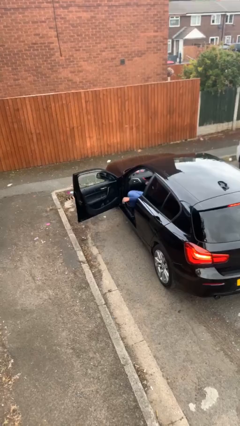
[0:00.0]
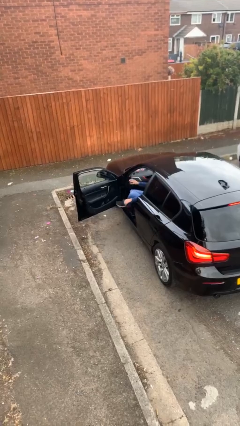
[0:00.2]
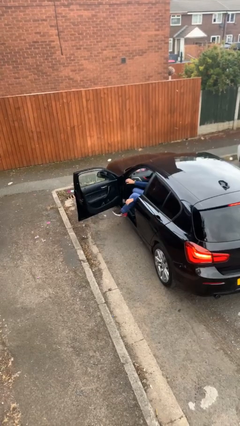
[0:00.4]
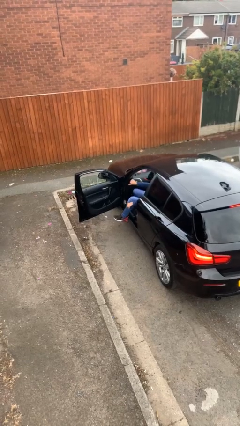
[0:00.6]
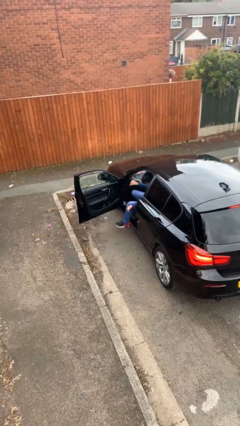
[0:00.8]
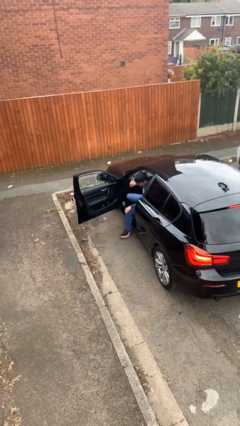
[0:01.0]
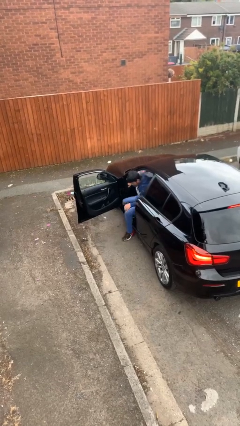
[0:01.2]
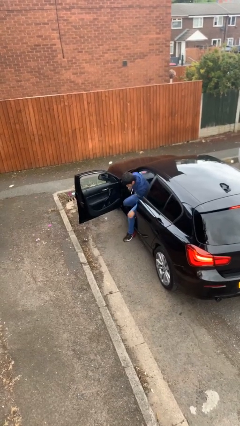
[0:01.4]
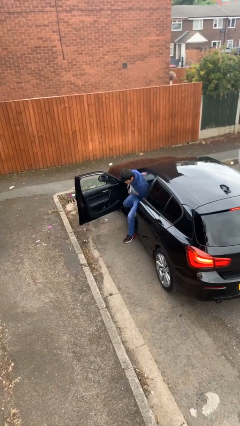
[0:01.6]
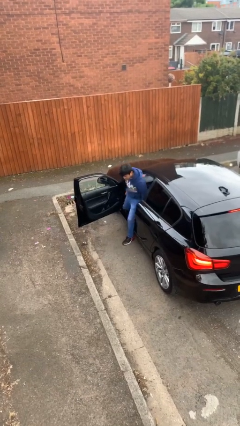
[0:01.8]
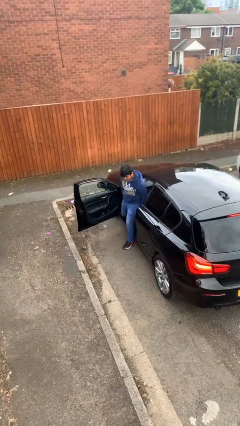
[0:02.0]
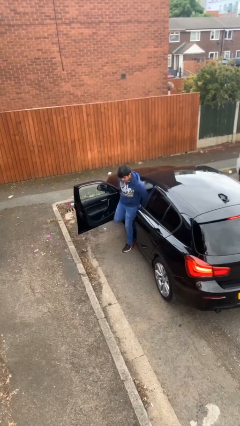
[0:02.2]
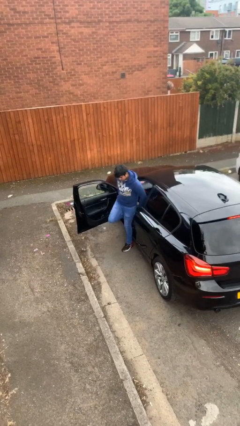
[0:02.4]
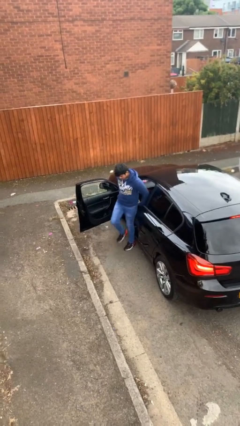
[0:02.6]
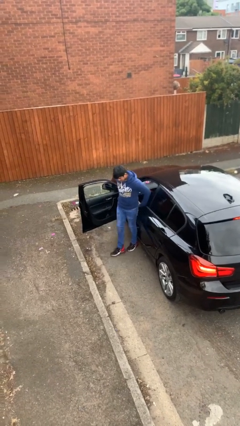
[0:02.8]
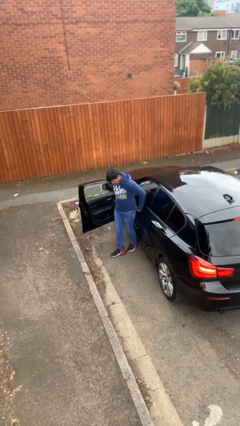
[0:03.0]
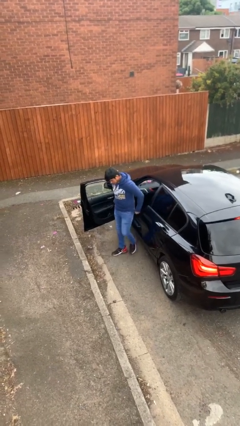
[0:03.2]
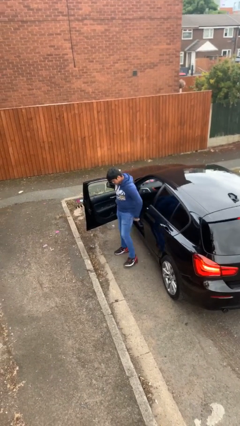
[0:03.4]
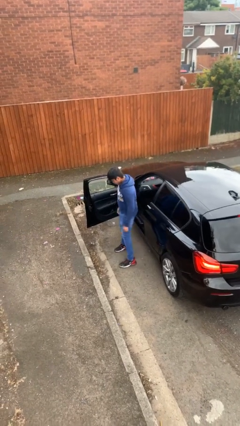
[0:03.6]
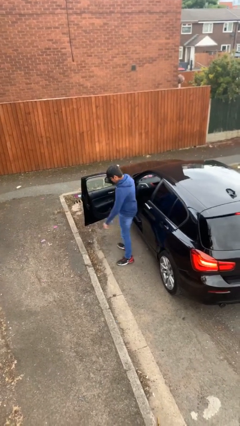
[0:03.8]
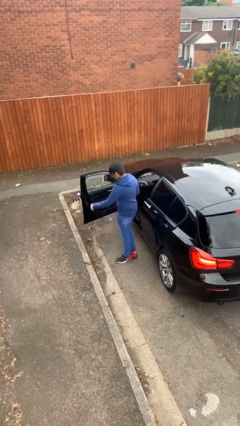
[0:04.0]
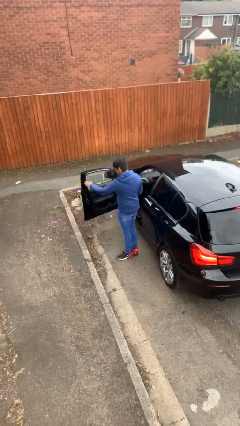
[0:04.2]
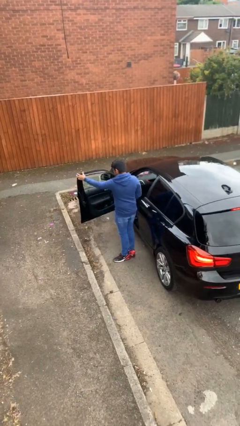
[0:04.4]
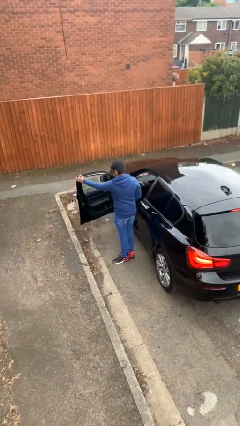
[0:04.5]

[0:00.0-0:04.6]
person exits car

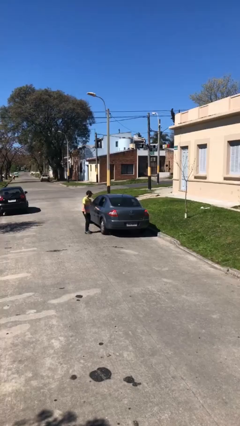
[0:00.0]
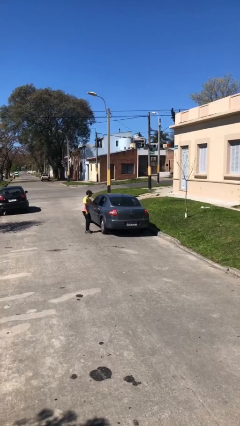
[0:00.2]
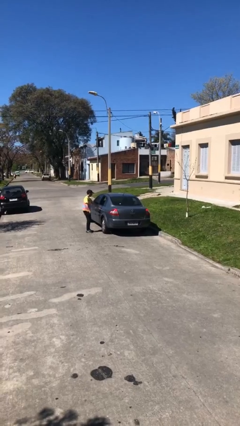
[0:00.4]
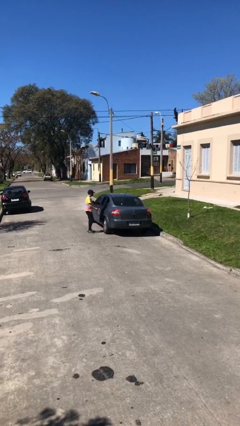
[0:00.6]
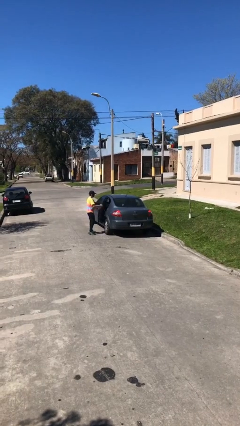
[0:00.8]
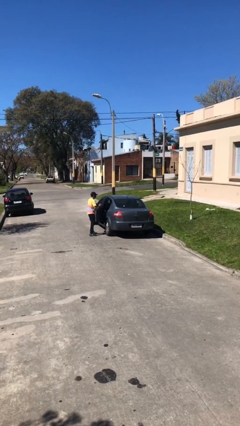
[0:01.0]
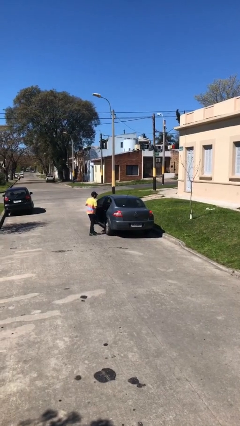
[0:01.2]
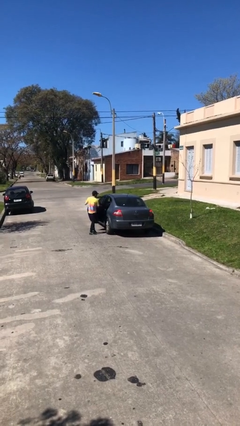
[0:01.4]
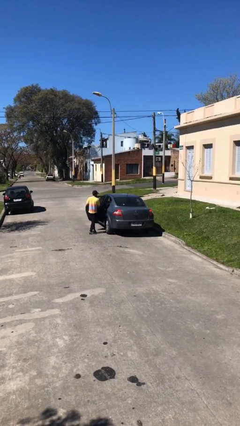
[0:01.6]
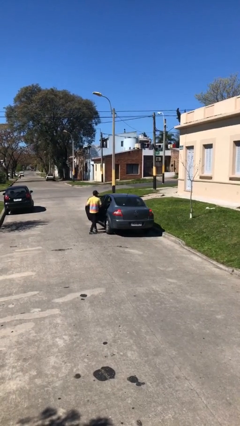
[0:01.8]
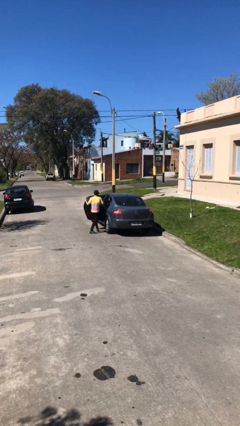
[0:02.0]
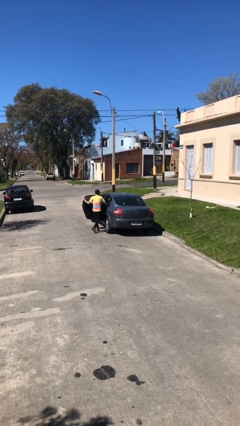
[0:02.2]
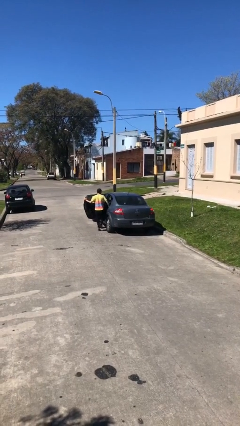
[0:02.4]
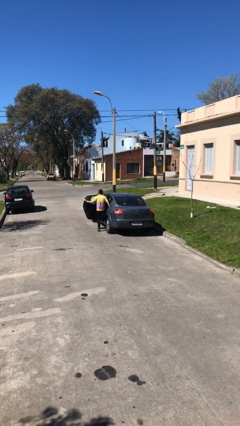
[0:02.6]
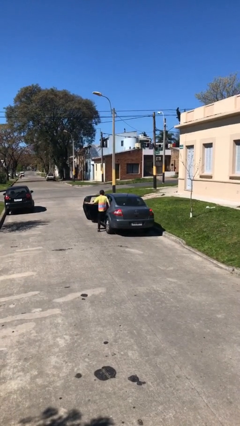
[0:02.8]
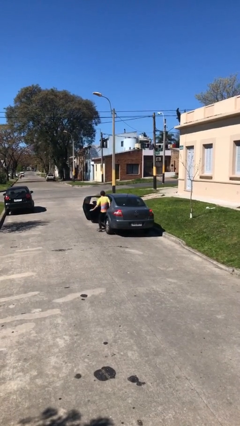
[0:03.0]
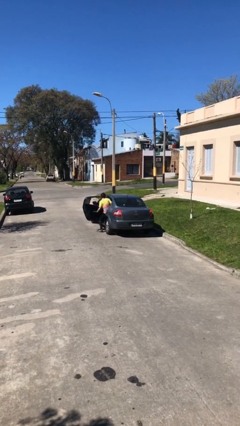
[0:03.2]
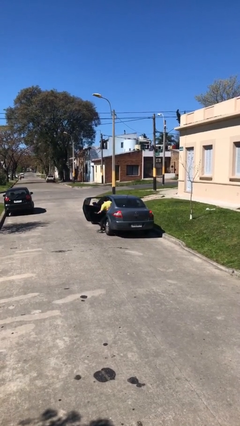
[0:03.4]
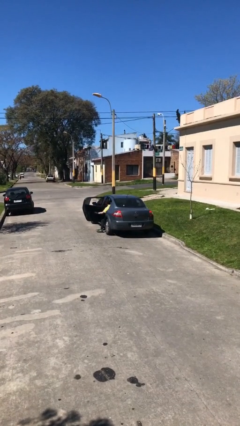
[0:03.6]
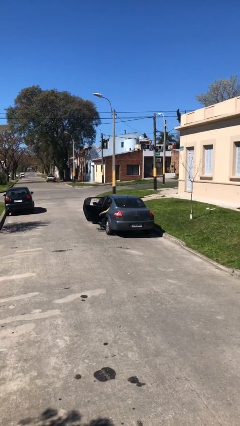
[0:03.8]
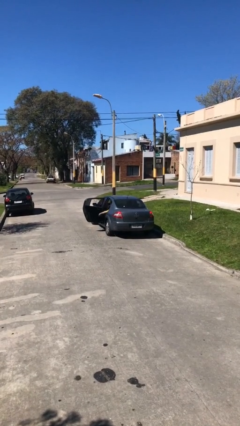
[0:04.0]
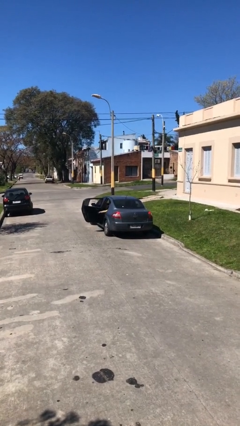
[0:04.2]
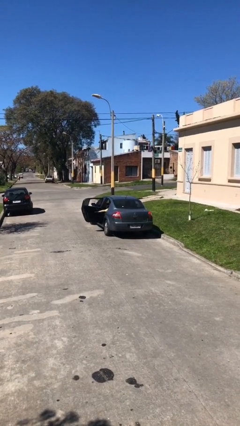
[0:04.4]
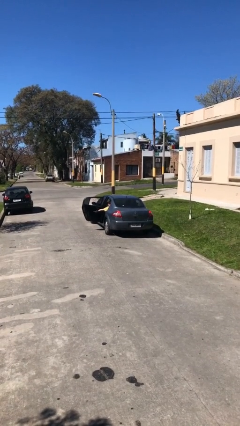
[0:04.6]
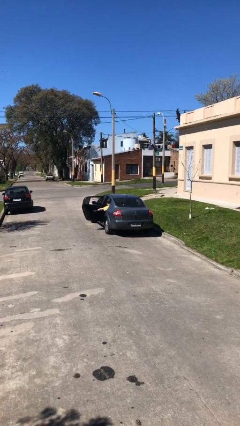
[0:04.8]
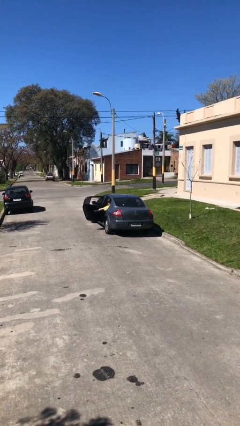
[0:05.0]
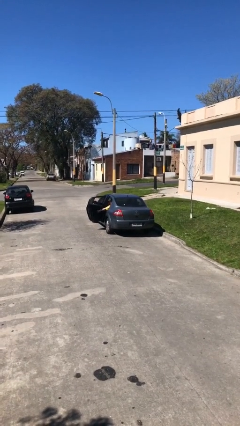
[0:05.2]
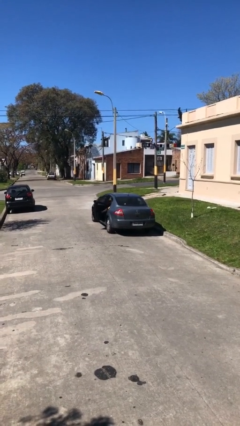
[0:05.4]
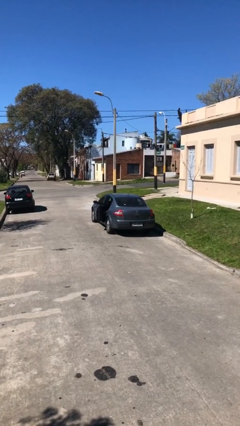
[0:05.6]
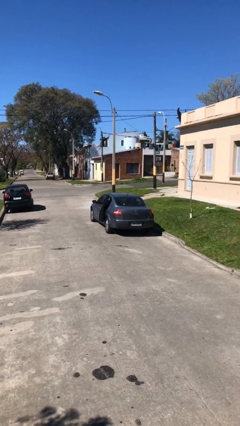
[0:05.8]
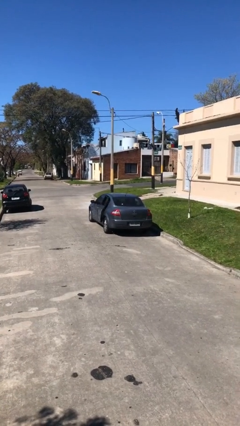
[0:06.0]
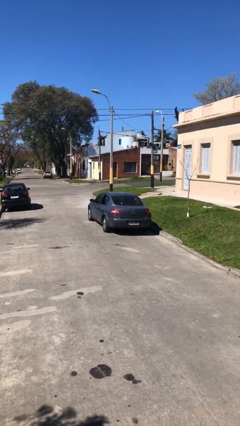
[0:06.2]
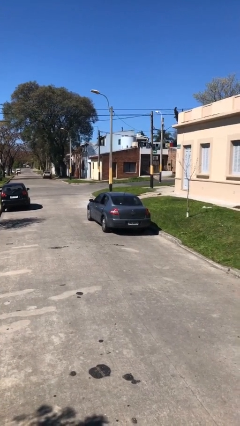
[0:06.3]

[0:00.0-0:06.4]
car picks up person

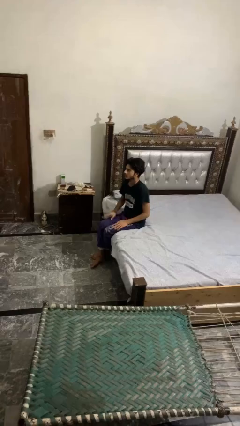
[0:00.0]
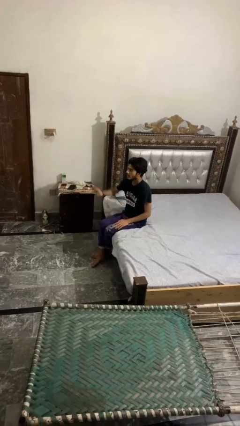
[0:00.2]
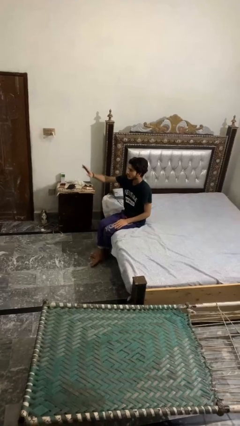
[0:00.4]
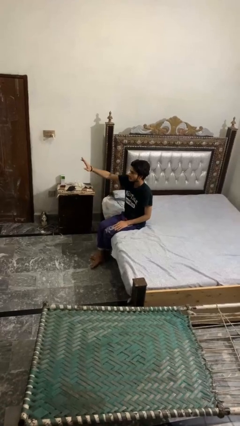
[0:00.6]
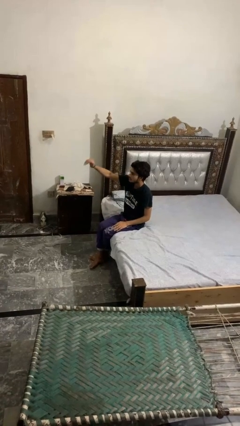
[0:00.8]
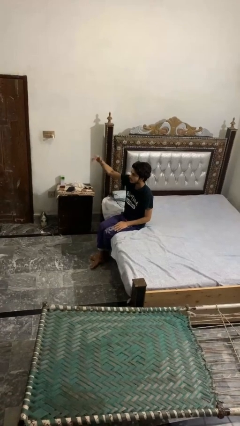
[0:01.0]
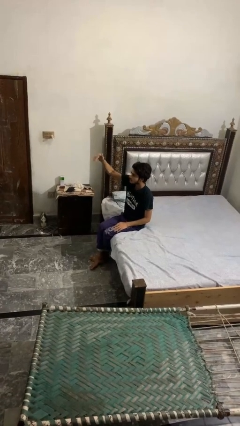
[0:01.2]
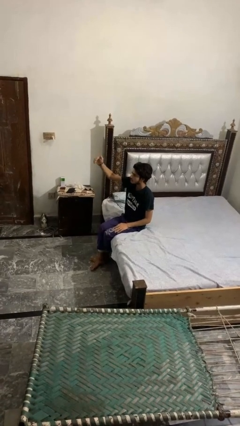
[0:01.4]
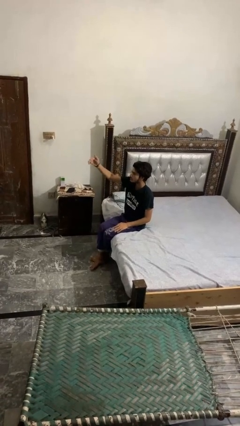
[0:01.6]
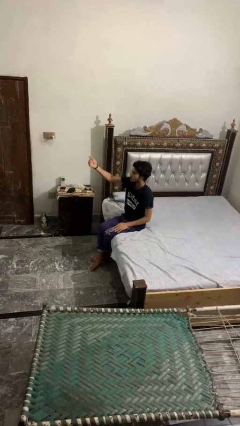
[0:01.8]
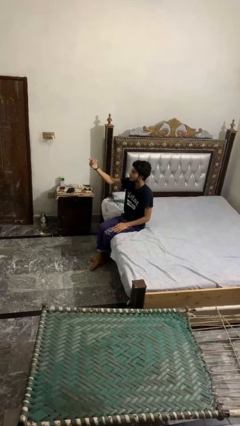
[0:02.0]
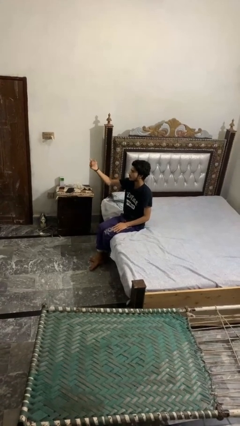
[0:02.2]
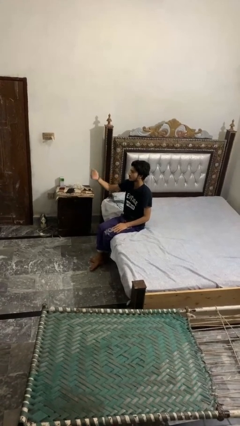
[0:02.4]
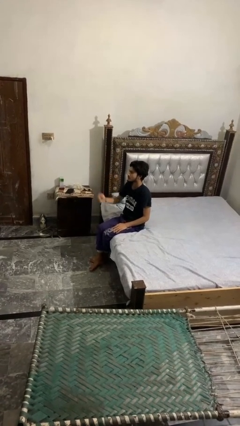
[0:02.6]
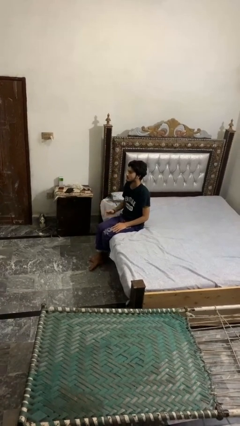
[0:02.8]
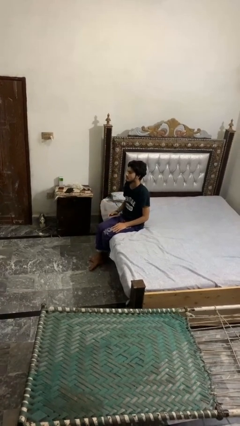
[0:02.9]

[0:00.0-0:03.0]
person gestures come here

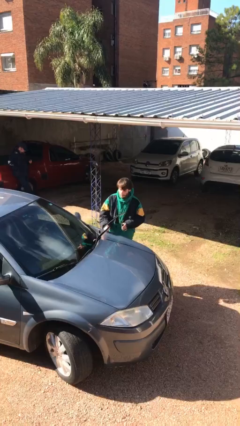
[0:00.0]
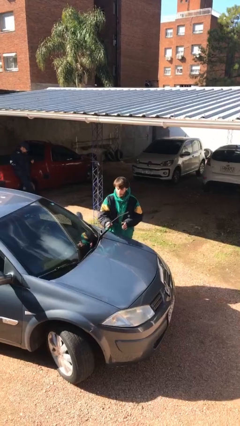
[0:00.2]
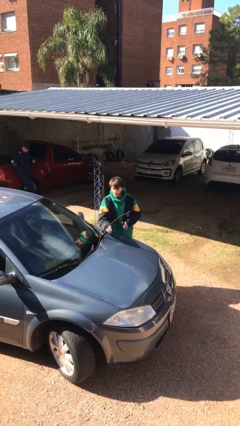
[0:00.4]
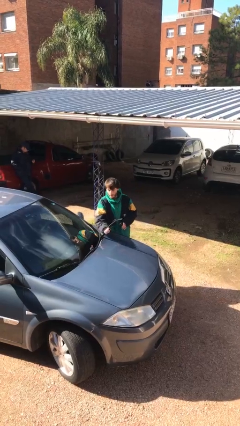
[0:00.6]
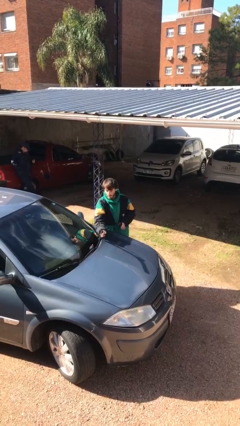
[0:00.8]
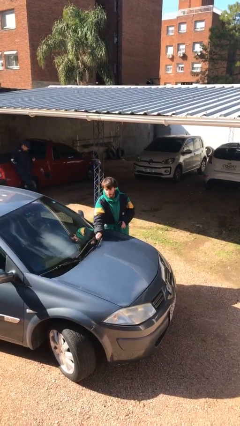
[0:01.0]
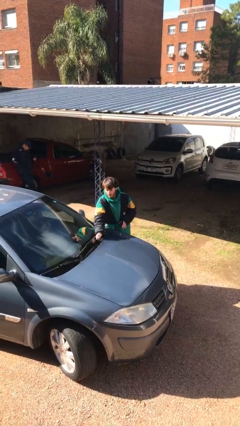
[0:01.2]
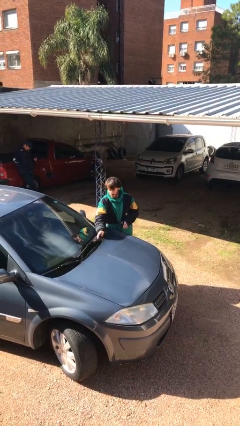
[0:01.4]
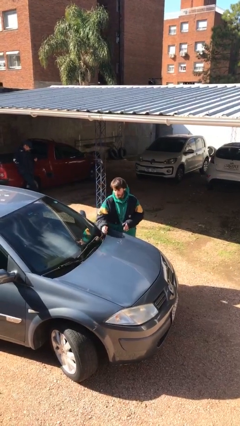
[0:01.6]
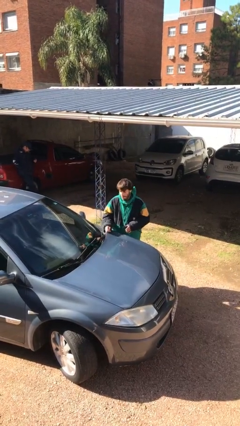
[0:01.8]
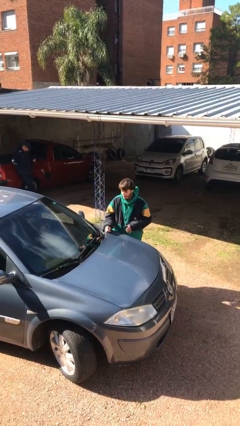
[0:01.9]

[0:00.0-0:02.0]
person flips down car wipers

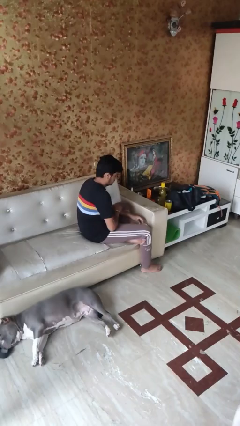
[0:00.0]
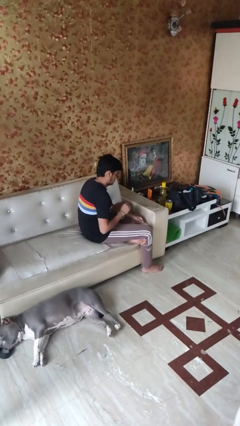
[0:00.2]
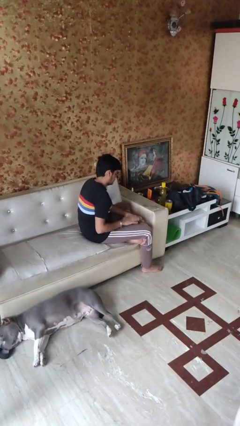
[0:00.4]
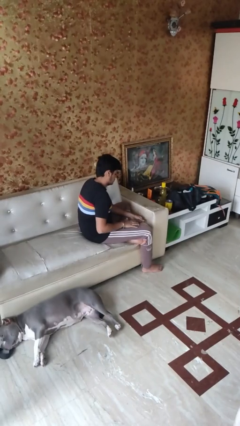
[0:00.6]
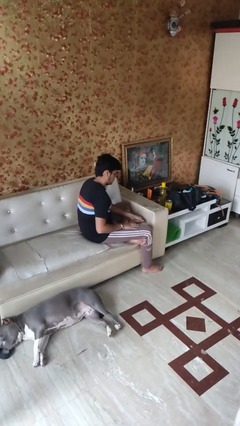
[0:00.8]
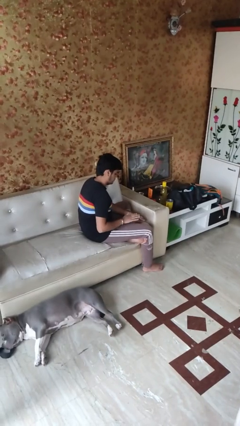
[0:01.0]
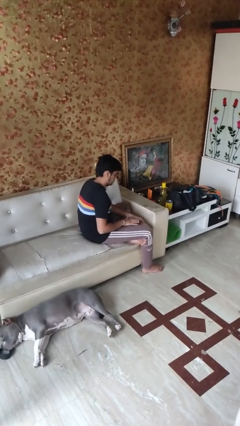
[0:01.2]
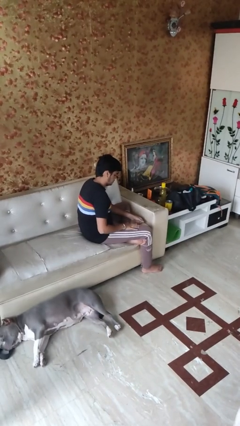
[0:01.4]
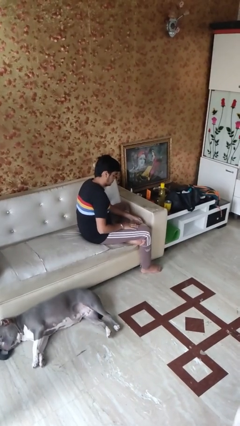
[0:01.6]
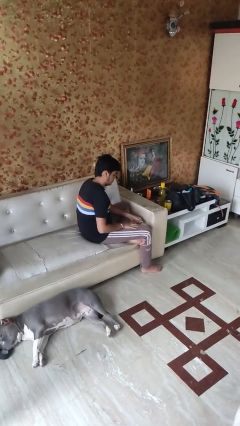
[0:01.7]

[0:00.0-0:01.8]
person slaps hands on thighs
